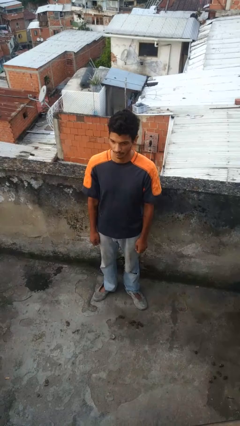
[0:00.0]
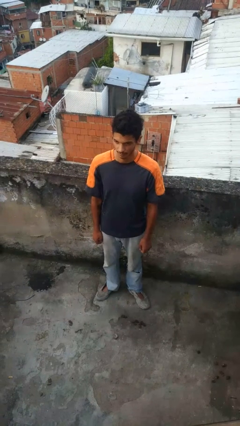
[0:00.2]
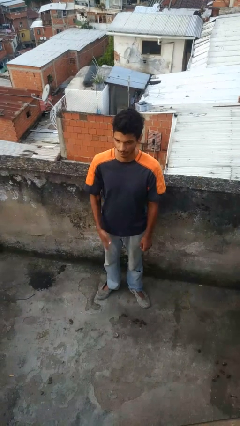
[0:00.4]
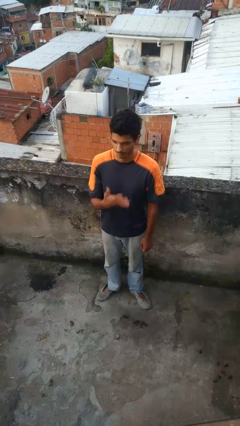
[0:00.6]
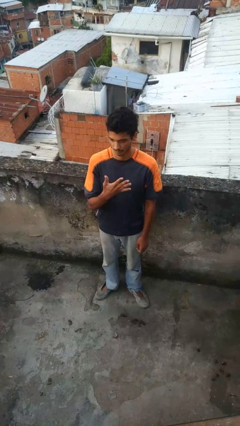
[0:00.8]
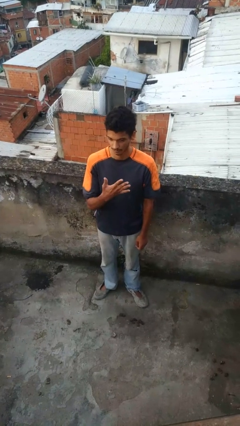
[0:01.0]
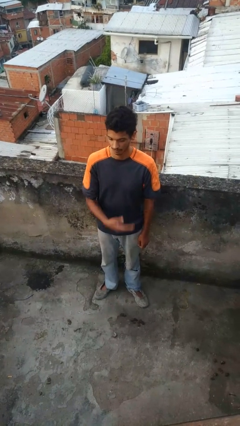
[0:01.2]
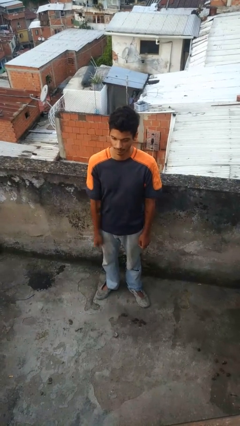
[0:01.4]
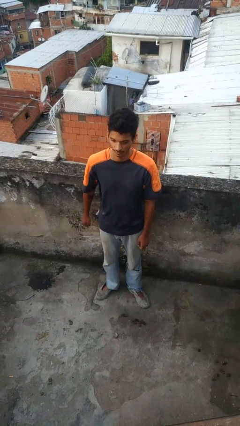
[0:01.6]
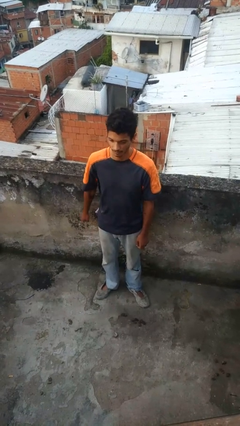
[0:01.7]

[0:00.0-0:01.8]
person gestures number five

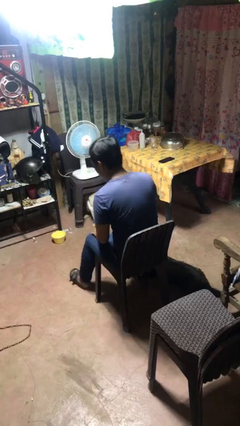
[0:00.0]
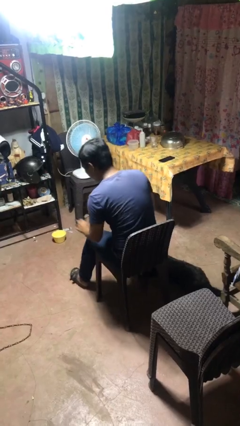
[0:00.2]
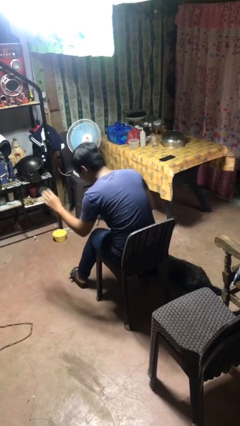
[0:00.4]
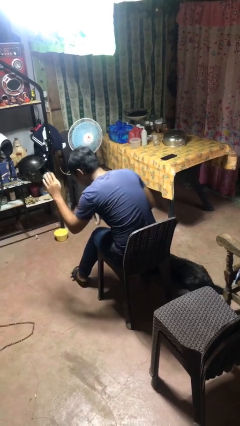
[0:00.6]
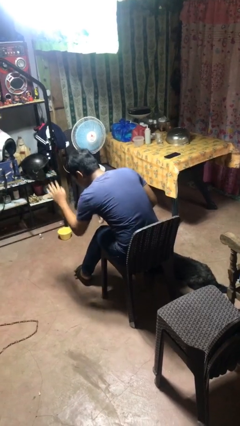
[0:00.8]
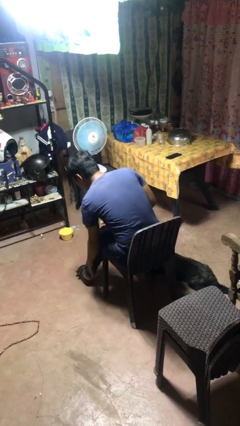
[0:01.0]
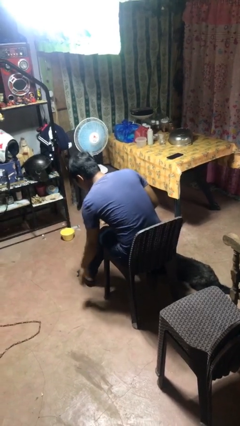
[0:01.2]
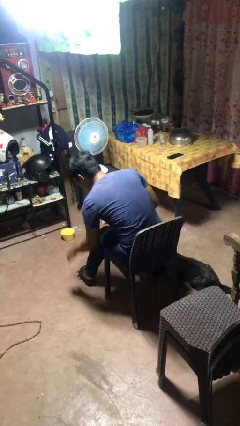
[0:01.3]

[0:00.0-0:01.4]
person swats bug

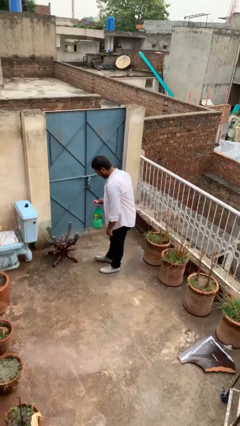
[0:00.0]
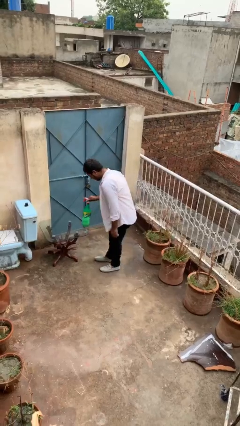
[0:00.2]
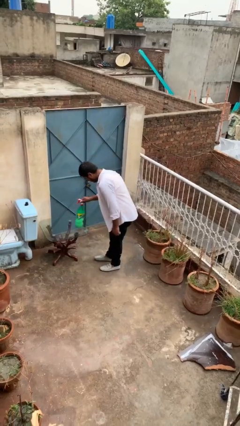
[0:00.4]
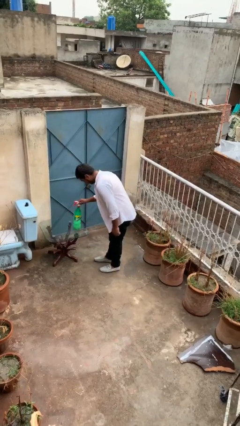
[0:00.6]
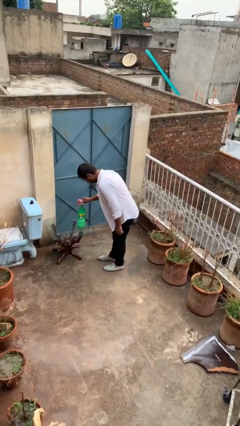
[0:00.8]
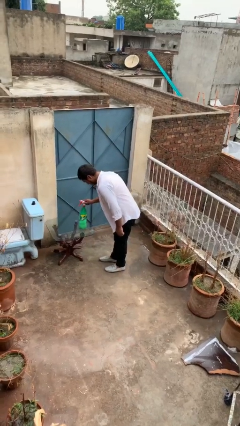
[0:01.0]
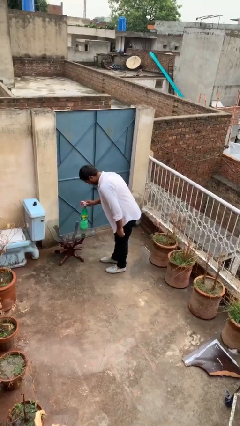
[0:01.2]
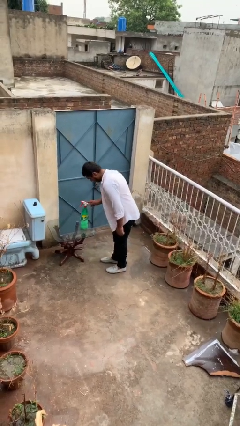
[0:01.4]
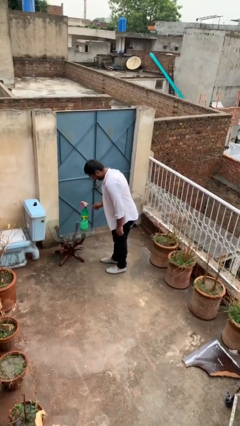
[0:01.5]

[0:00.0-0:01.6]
person puts down object on table

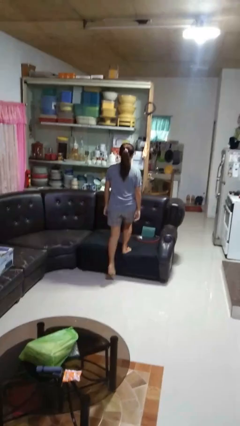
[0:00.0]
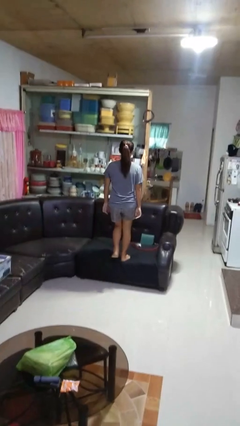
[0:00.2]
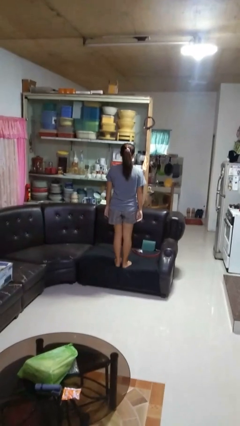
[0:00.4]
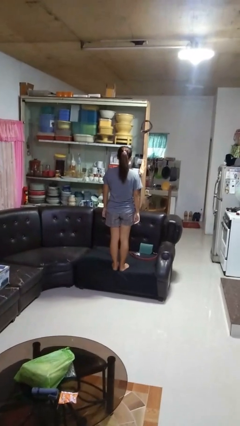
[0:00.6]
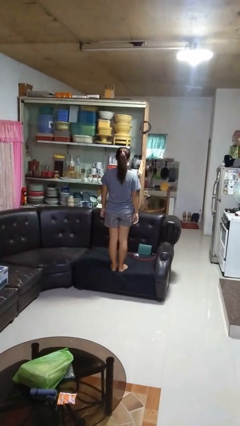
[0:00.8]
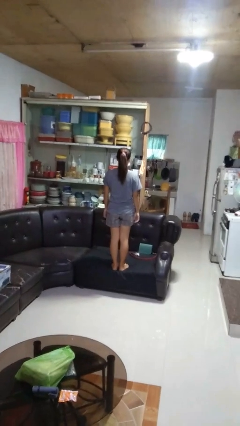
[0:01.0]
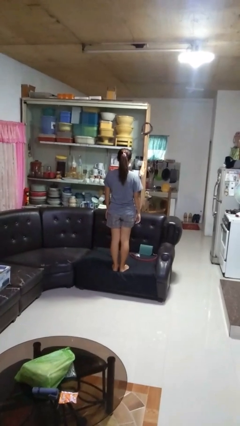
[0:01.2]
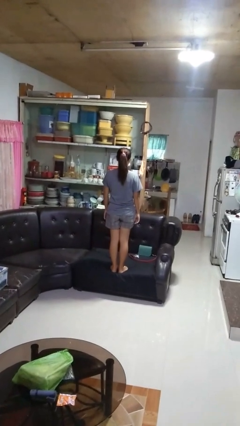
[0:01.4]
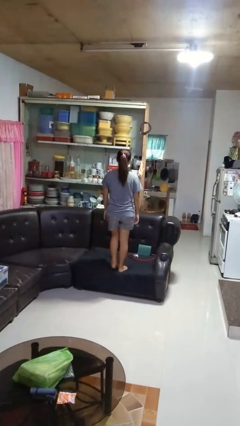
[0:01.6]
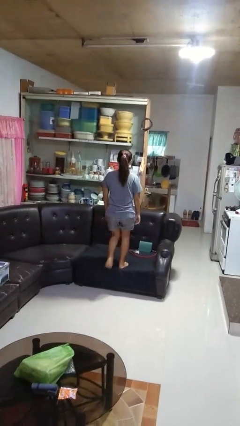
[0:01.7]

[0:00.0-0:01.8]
person climbs on couch

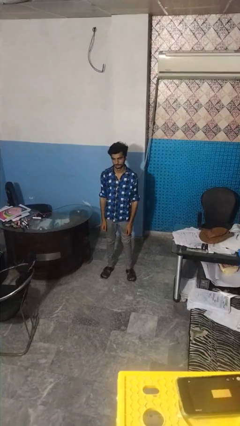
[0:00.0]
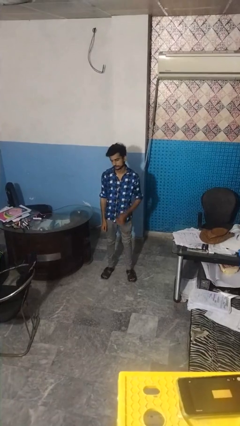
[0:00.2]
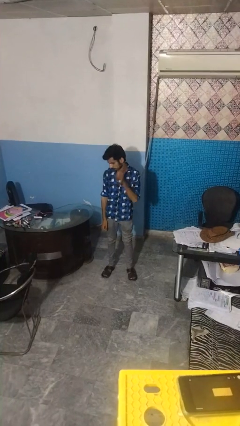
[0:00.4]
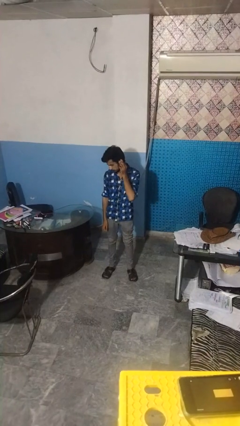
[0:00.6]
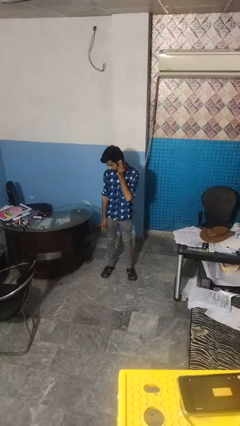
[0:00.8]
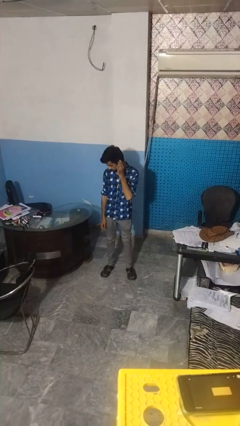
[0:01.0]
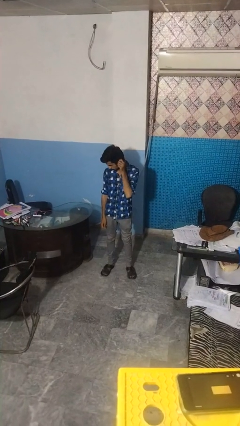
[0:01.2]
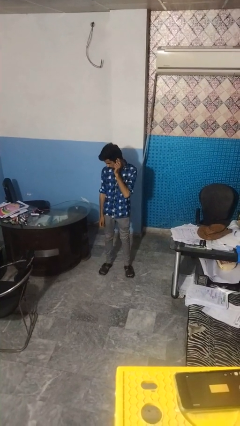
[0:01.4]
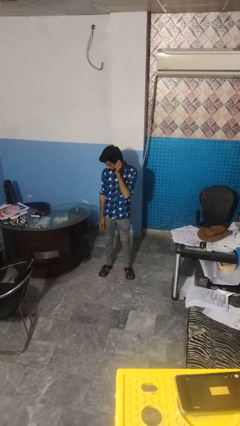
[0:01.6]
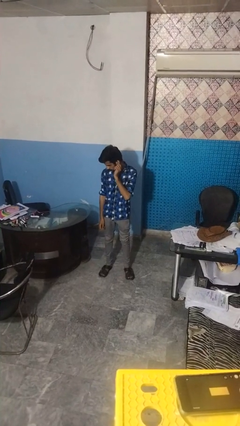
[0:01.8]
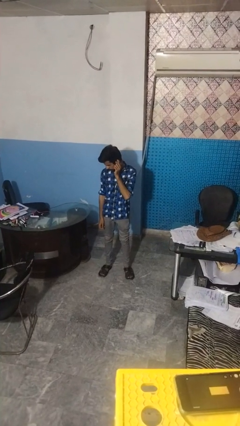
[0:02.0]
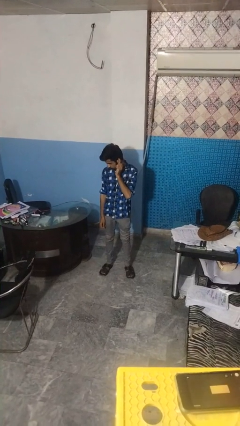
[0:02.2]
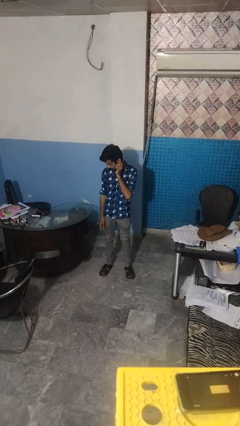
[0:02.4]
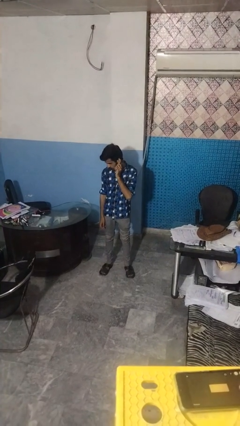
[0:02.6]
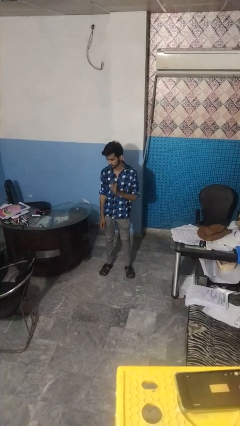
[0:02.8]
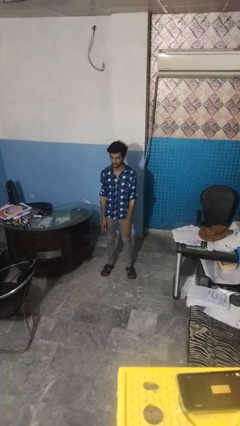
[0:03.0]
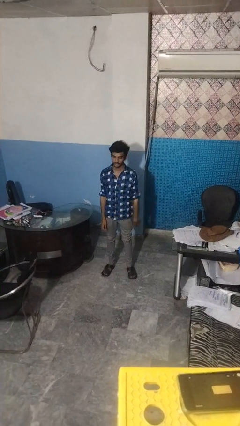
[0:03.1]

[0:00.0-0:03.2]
person touches earlobe

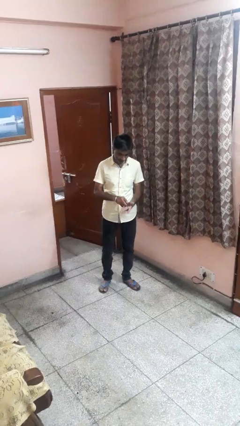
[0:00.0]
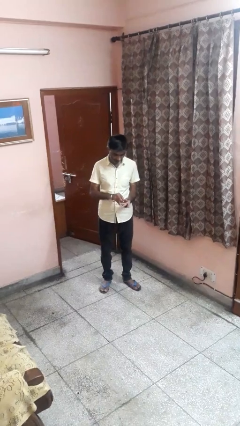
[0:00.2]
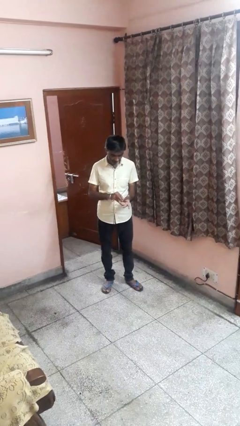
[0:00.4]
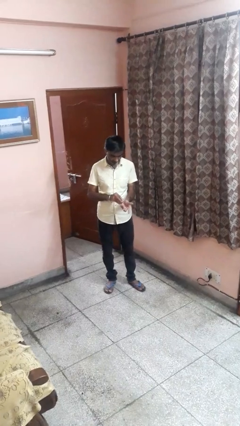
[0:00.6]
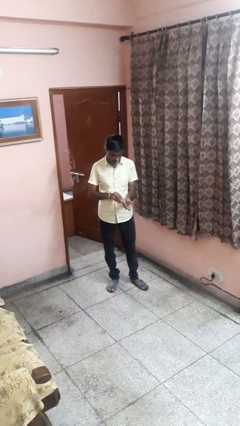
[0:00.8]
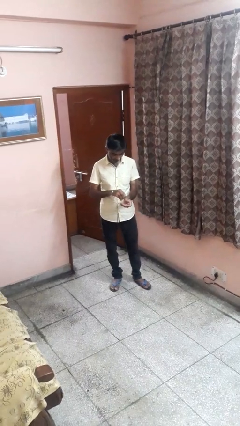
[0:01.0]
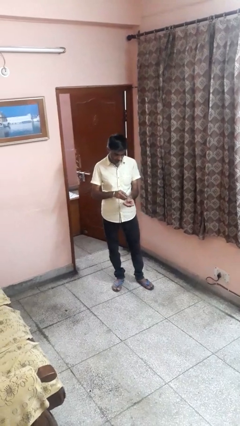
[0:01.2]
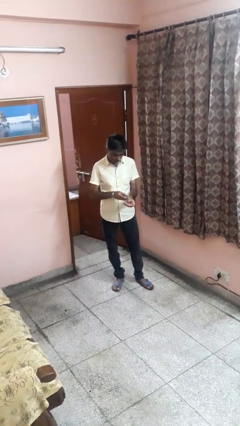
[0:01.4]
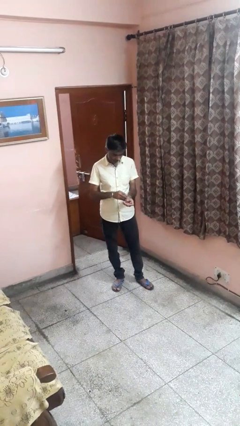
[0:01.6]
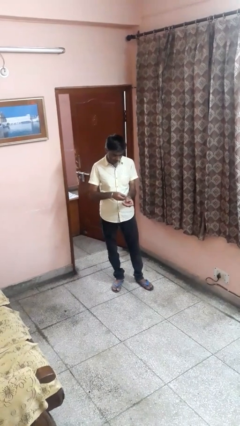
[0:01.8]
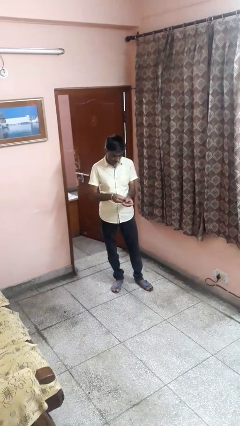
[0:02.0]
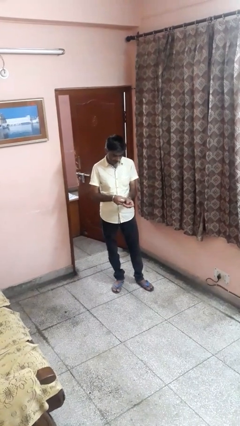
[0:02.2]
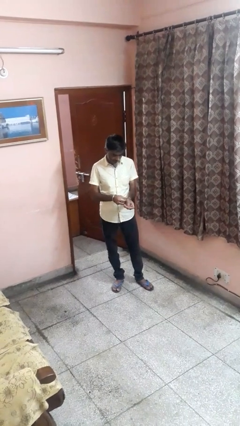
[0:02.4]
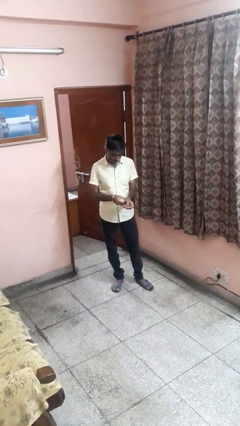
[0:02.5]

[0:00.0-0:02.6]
person puts on wristwatch

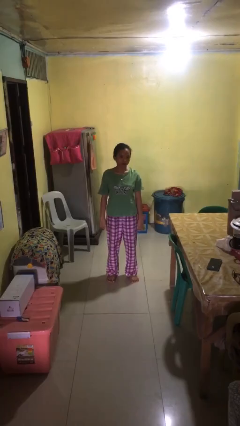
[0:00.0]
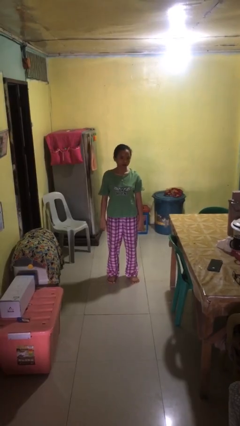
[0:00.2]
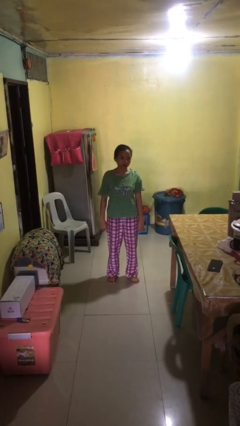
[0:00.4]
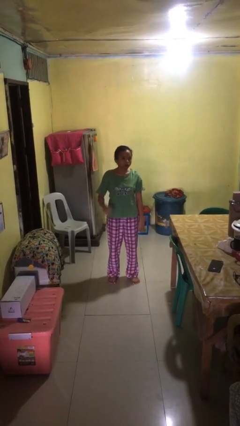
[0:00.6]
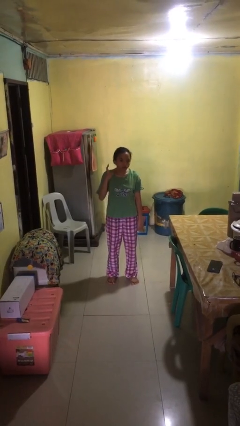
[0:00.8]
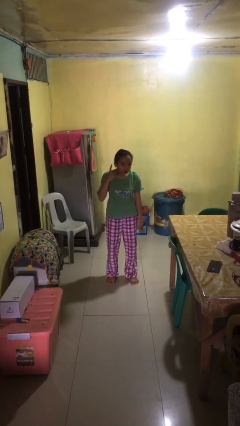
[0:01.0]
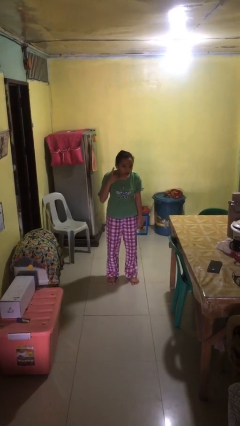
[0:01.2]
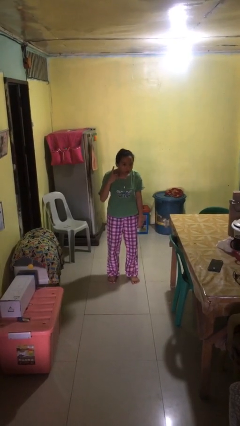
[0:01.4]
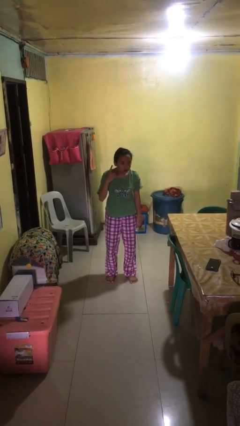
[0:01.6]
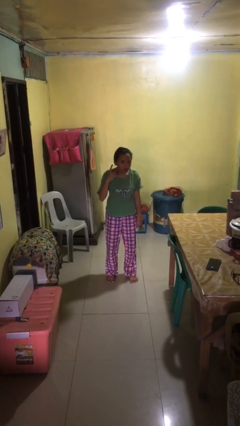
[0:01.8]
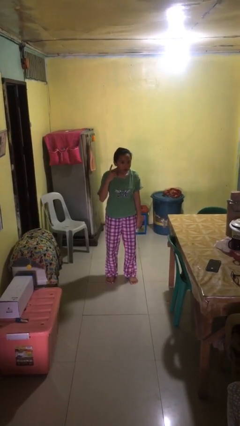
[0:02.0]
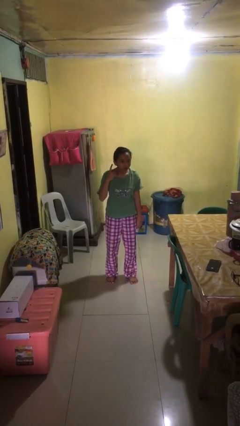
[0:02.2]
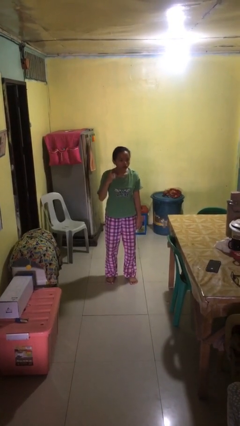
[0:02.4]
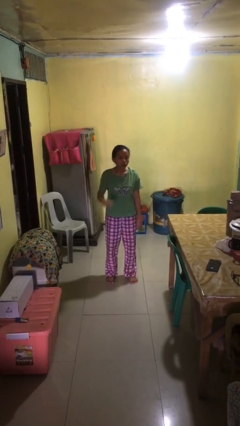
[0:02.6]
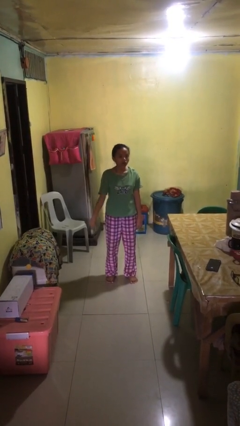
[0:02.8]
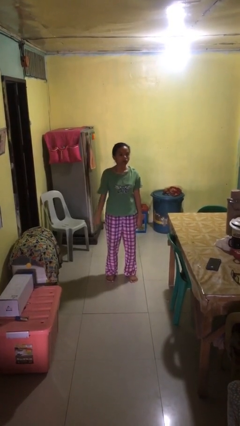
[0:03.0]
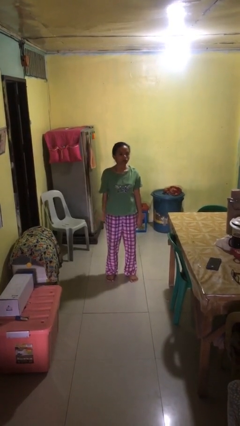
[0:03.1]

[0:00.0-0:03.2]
person gestures listen closely

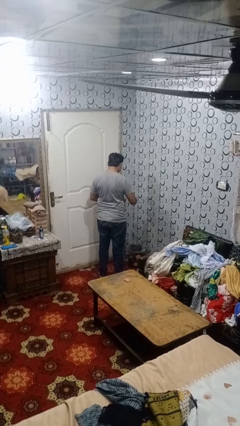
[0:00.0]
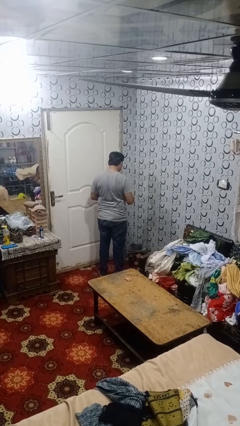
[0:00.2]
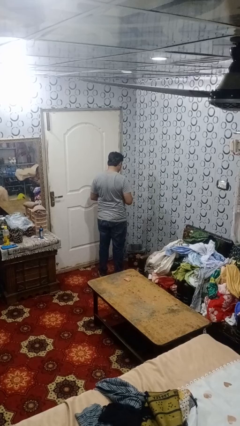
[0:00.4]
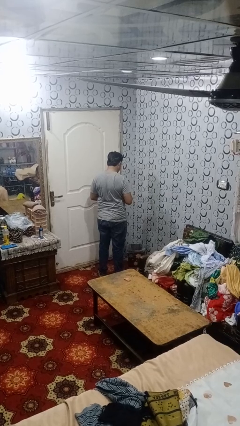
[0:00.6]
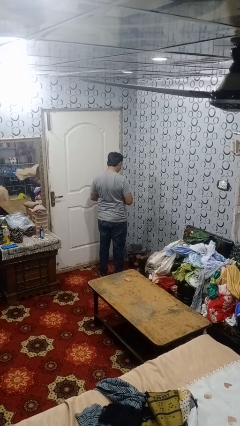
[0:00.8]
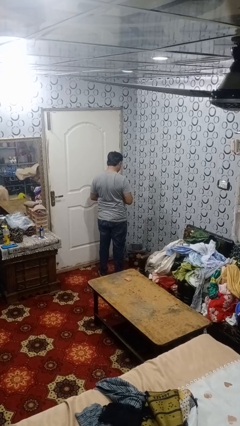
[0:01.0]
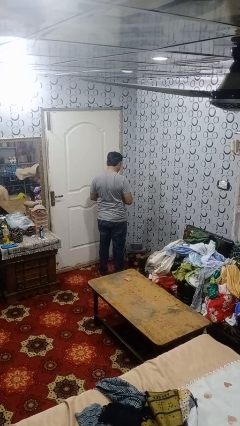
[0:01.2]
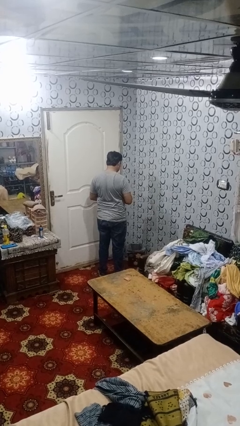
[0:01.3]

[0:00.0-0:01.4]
person discards trash
